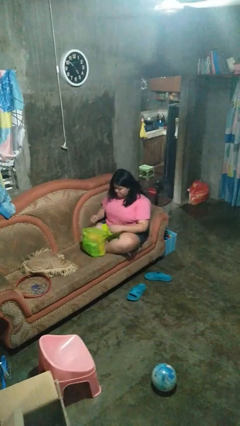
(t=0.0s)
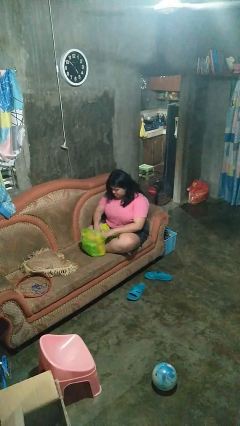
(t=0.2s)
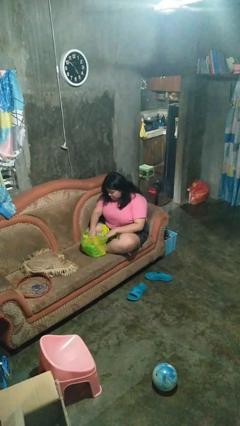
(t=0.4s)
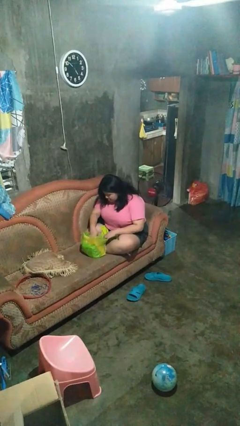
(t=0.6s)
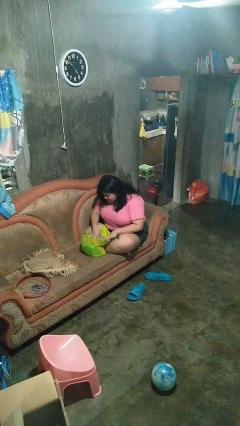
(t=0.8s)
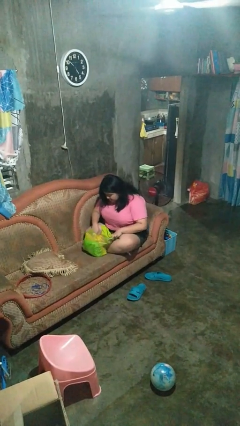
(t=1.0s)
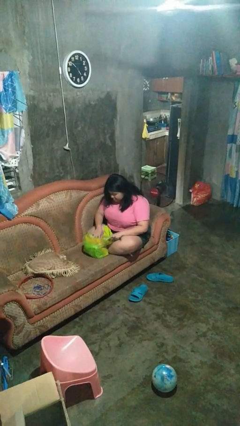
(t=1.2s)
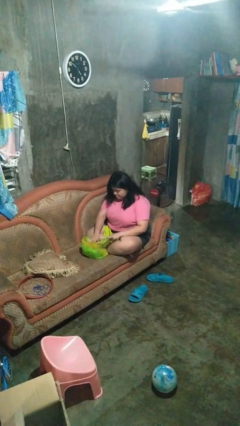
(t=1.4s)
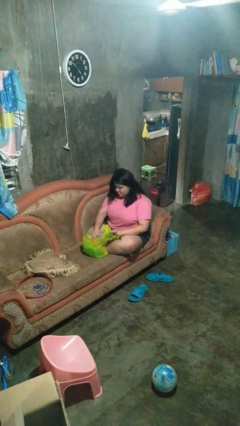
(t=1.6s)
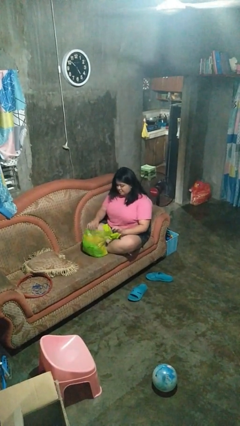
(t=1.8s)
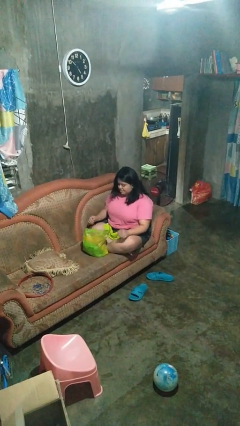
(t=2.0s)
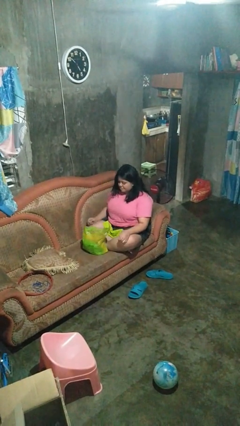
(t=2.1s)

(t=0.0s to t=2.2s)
person searches in bag

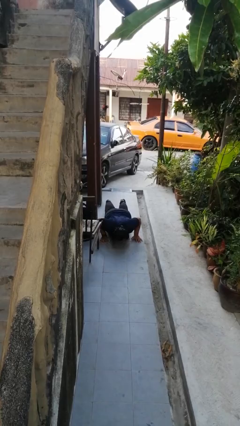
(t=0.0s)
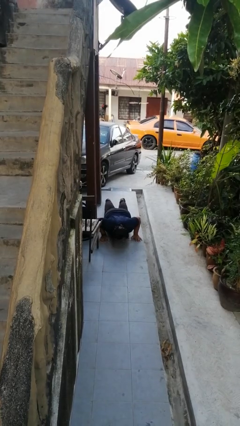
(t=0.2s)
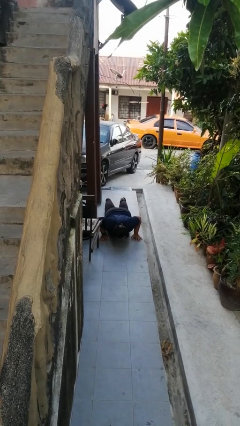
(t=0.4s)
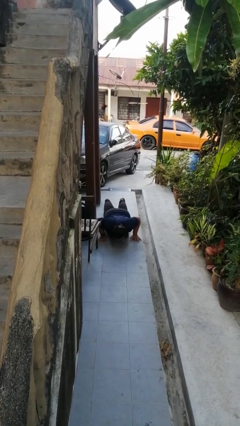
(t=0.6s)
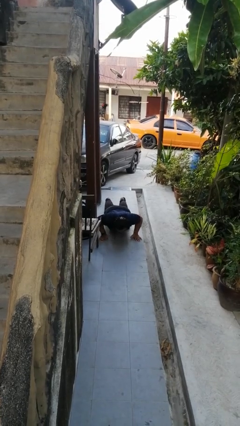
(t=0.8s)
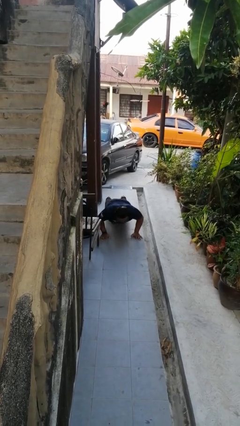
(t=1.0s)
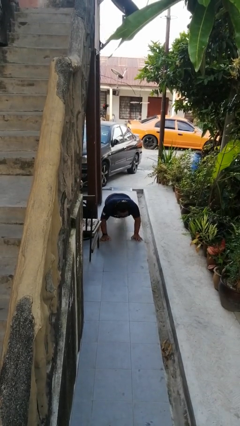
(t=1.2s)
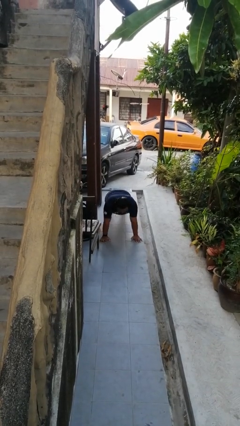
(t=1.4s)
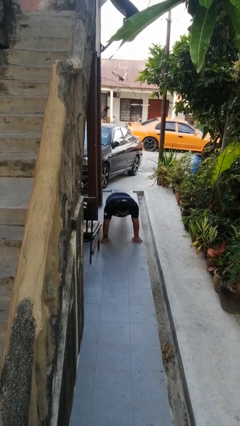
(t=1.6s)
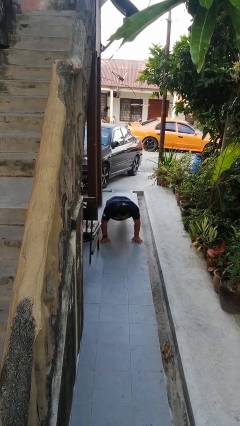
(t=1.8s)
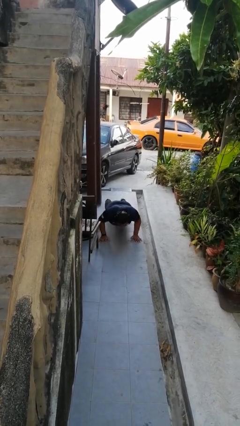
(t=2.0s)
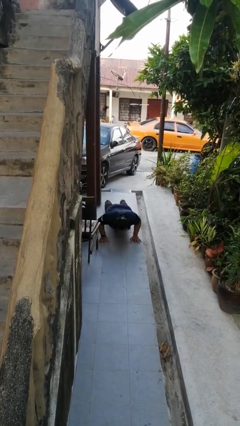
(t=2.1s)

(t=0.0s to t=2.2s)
person exercises with pushup

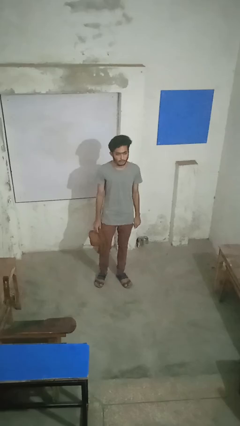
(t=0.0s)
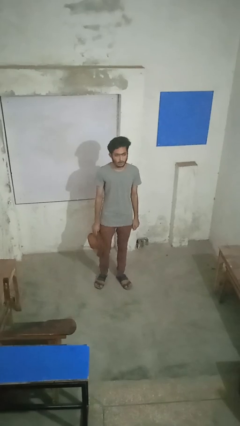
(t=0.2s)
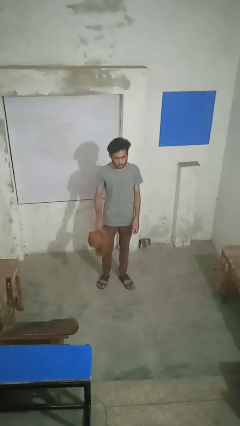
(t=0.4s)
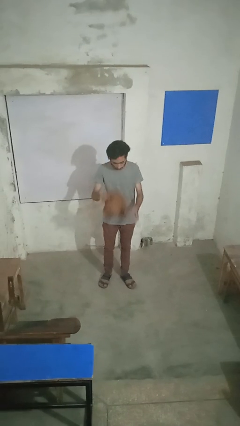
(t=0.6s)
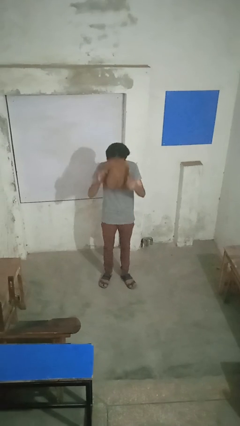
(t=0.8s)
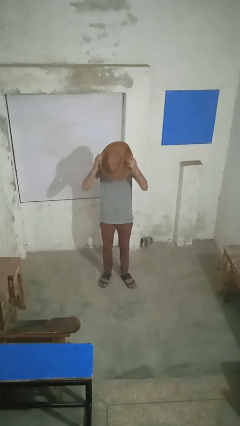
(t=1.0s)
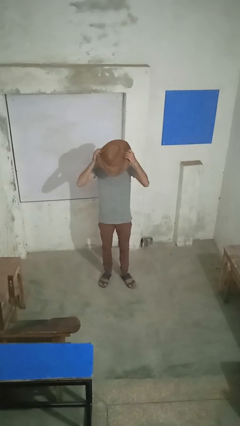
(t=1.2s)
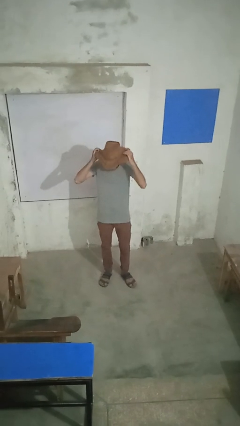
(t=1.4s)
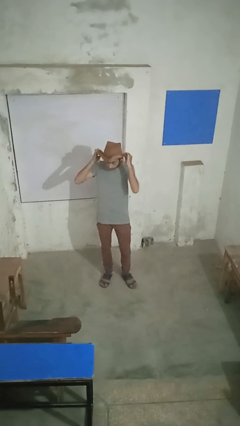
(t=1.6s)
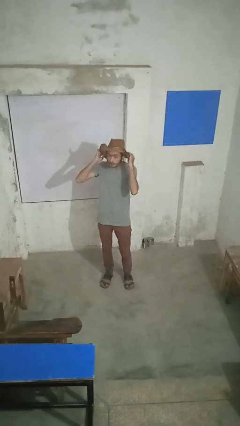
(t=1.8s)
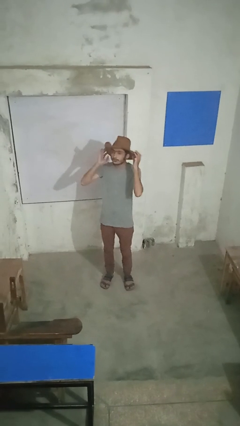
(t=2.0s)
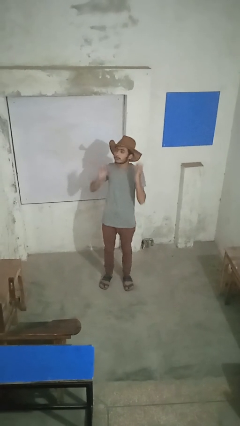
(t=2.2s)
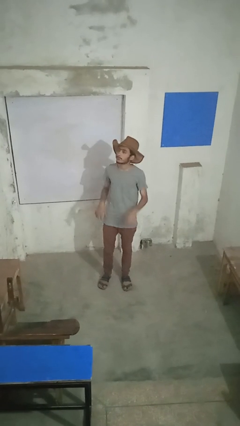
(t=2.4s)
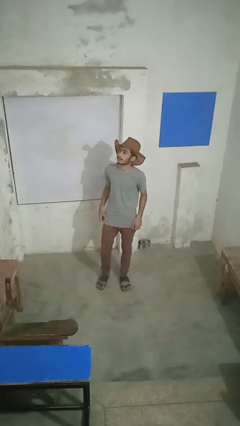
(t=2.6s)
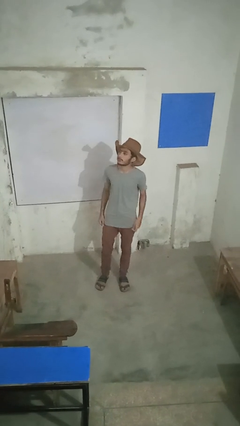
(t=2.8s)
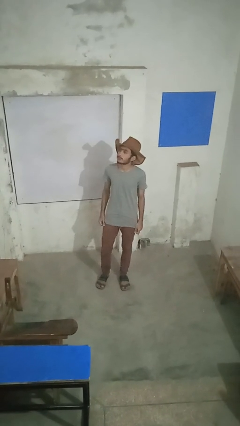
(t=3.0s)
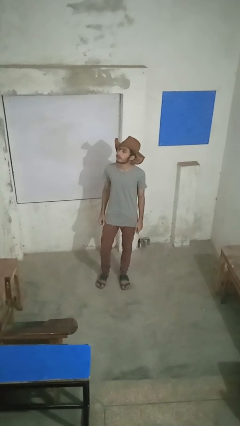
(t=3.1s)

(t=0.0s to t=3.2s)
person puts on hat

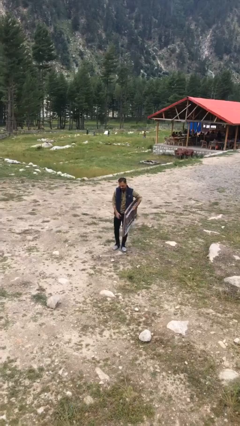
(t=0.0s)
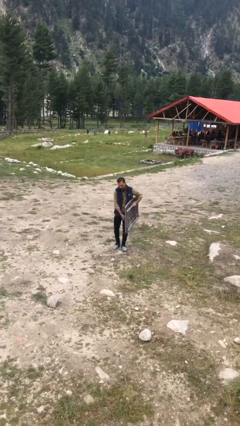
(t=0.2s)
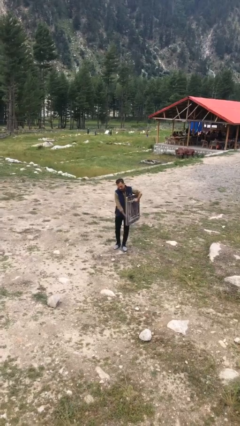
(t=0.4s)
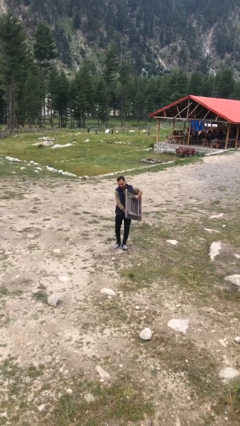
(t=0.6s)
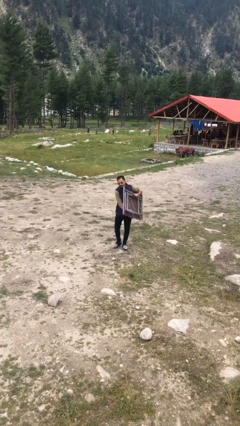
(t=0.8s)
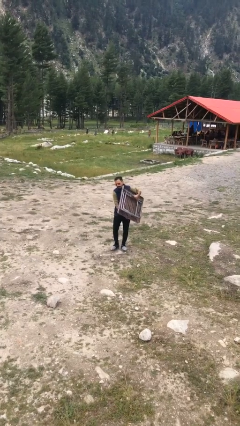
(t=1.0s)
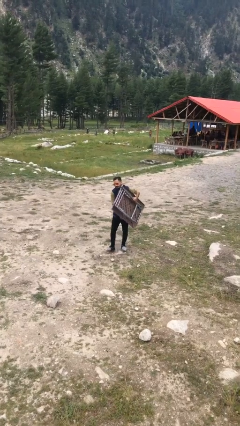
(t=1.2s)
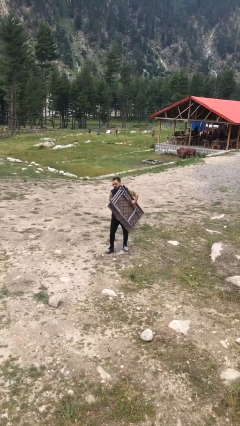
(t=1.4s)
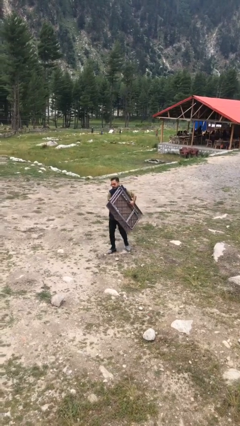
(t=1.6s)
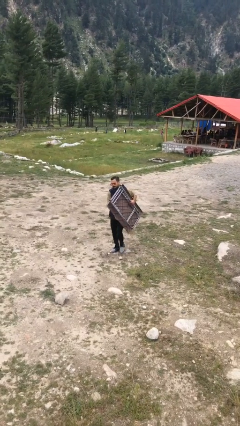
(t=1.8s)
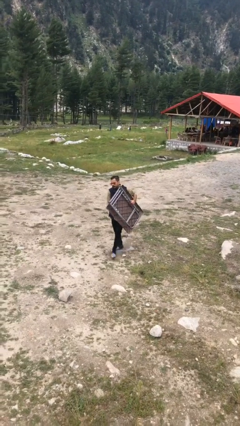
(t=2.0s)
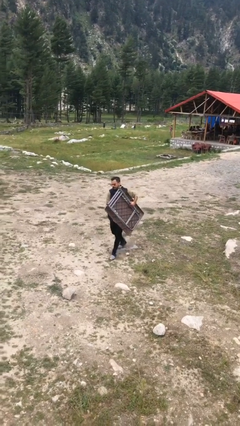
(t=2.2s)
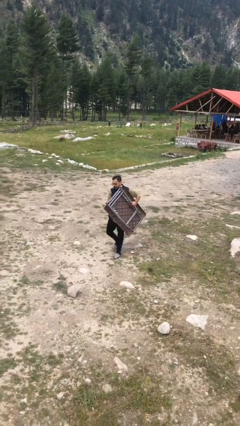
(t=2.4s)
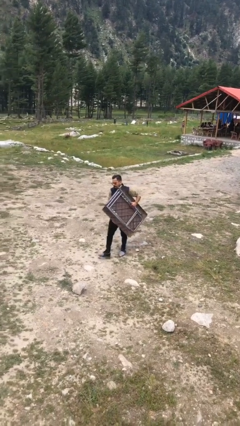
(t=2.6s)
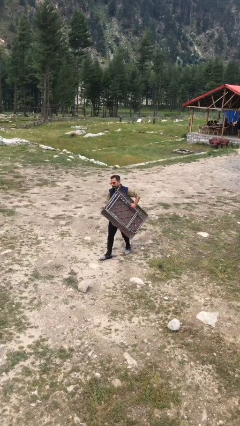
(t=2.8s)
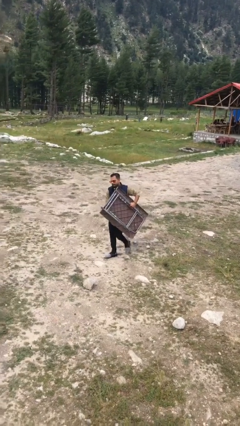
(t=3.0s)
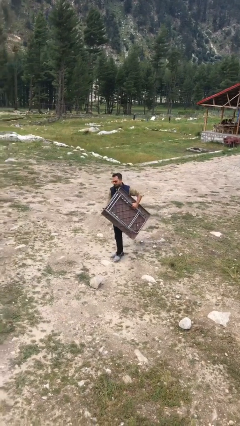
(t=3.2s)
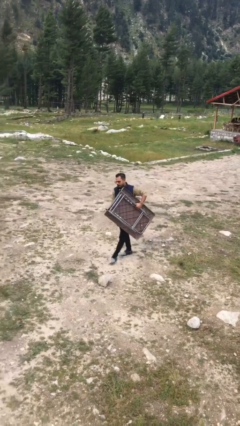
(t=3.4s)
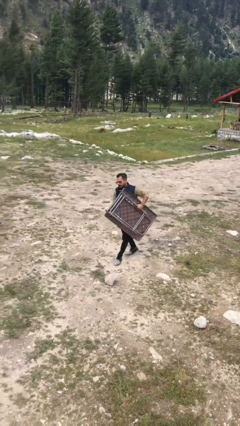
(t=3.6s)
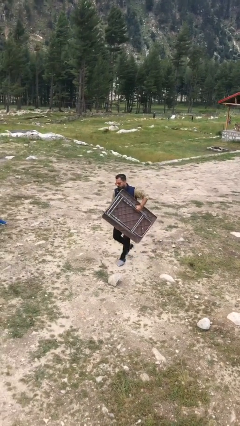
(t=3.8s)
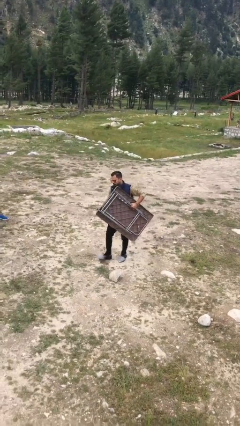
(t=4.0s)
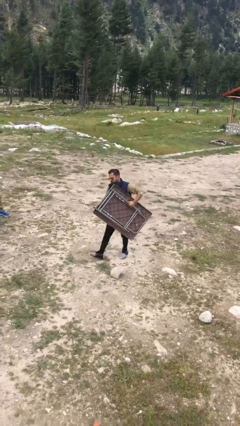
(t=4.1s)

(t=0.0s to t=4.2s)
person carries heavy object

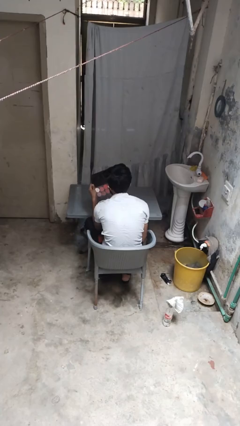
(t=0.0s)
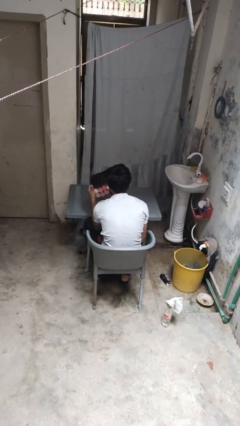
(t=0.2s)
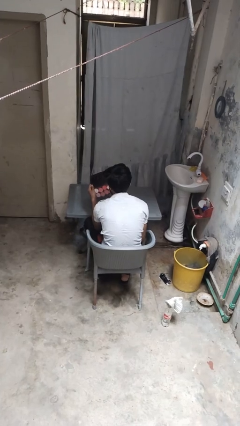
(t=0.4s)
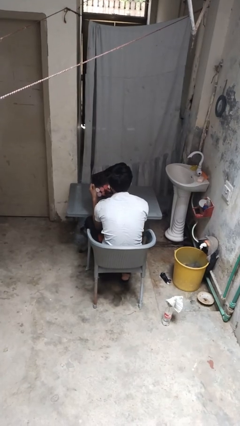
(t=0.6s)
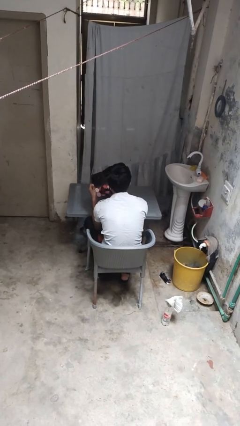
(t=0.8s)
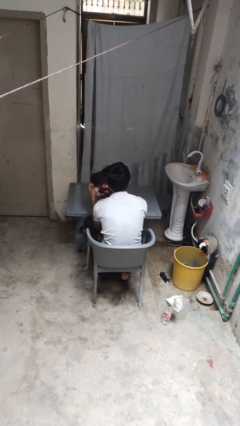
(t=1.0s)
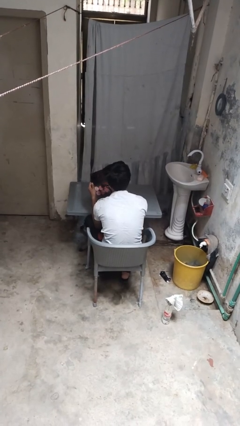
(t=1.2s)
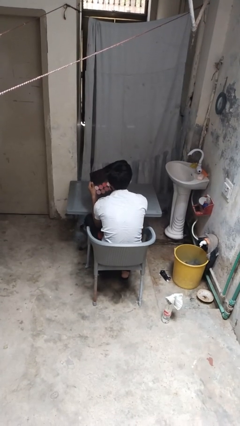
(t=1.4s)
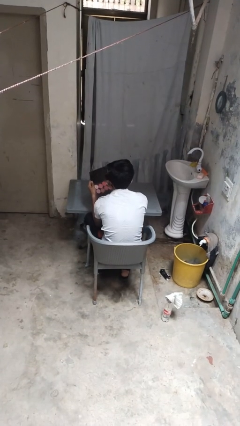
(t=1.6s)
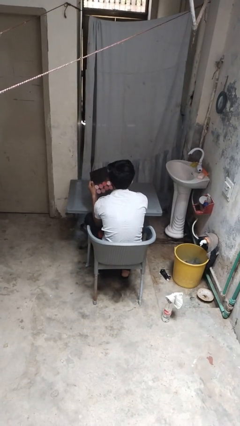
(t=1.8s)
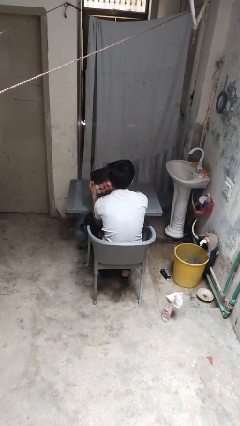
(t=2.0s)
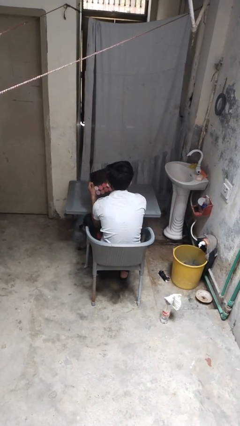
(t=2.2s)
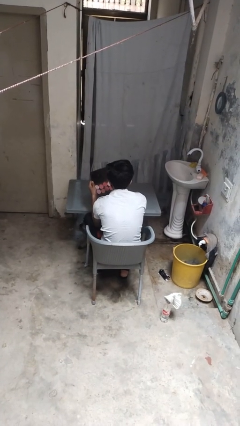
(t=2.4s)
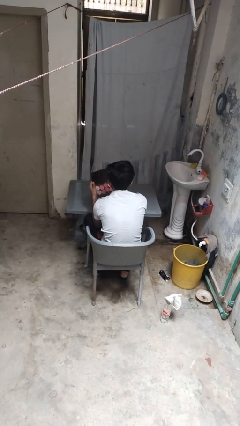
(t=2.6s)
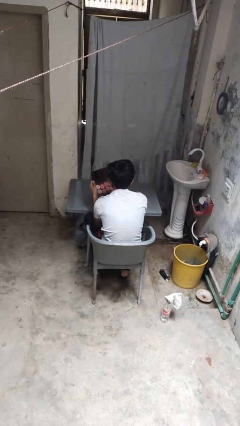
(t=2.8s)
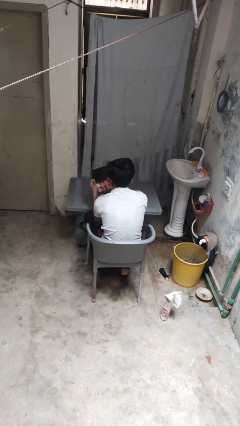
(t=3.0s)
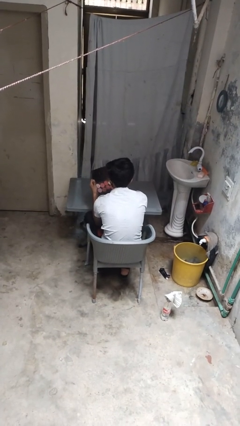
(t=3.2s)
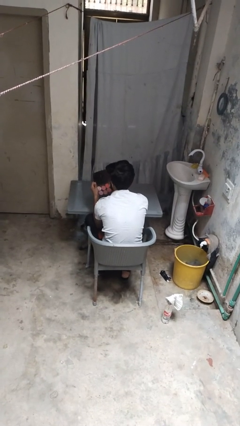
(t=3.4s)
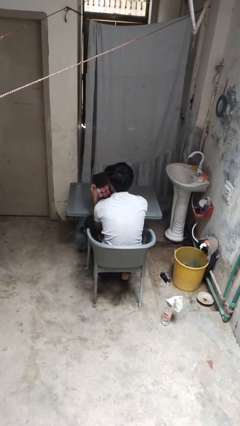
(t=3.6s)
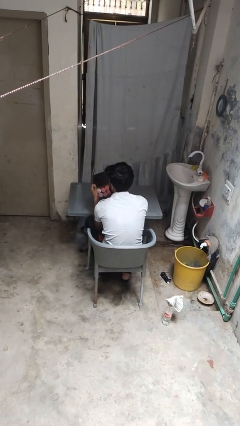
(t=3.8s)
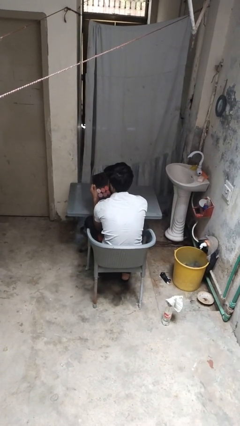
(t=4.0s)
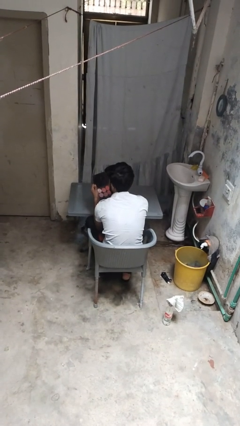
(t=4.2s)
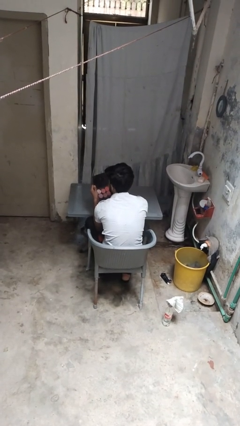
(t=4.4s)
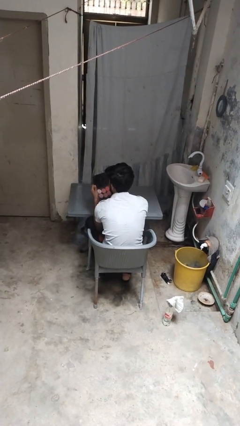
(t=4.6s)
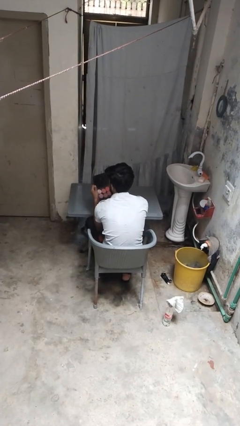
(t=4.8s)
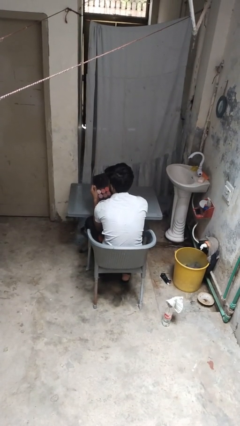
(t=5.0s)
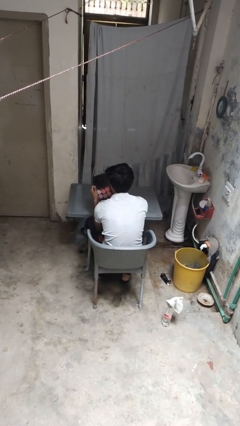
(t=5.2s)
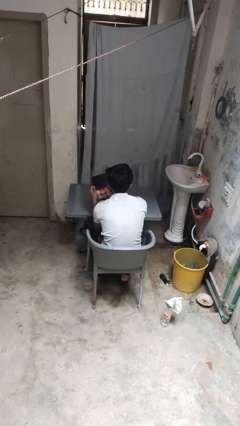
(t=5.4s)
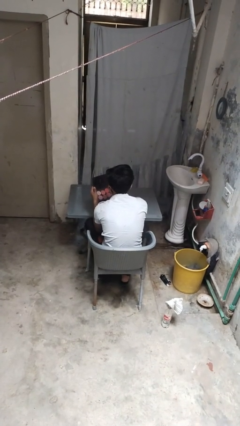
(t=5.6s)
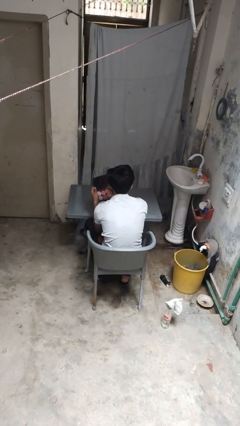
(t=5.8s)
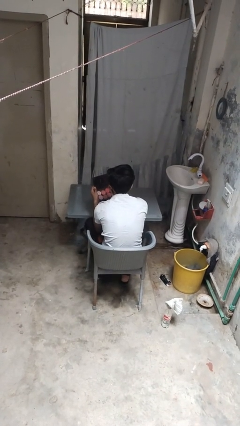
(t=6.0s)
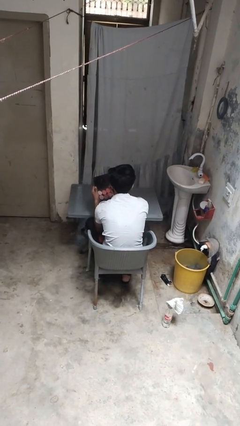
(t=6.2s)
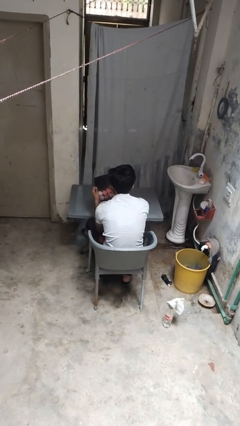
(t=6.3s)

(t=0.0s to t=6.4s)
person applies eye makeup
